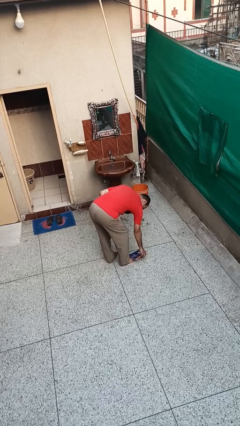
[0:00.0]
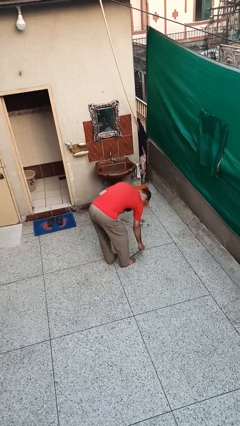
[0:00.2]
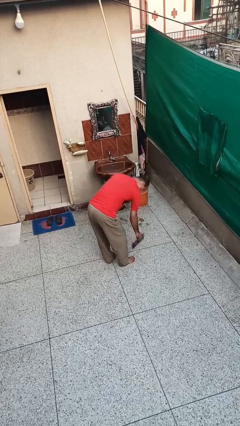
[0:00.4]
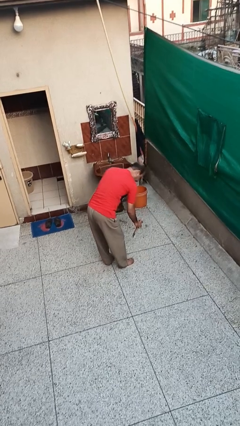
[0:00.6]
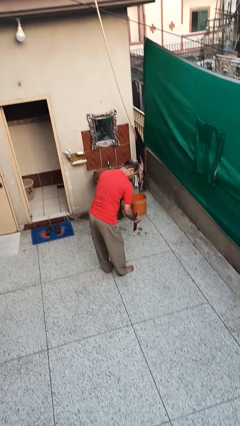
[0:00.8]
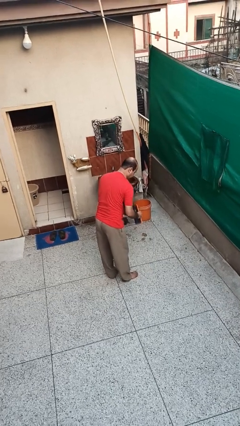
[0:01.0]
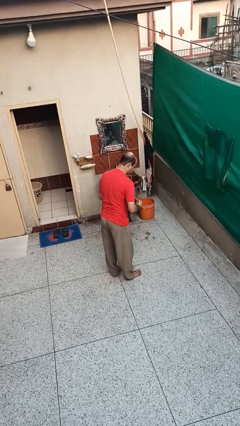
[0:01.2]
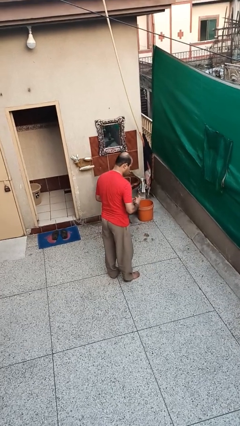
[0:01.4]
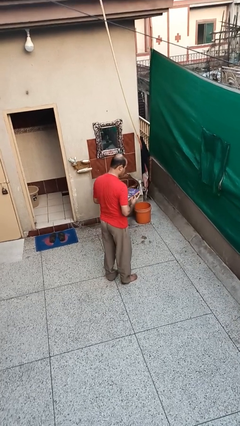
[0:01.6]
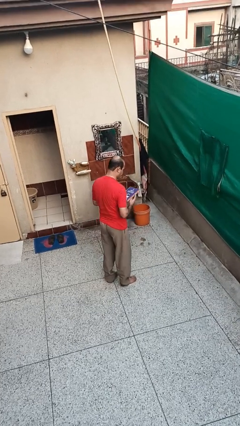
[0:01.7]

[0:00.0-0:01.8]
person picks up object from floor

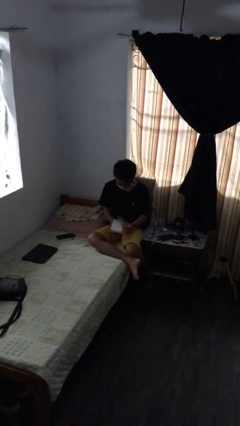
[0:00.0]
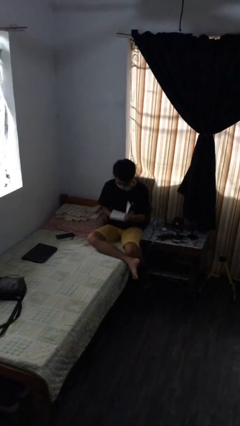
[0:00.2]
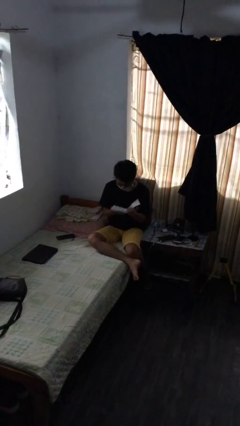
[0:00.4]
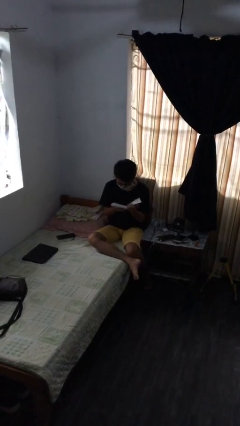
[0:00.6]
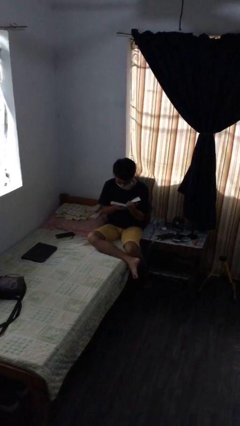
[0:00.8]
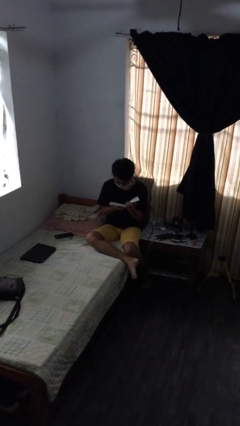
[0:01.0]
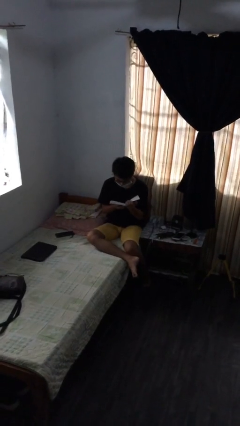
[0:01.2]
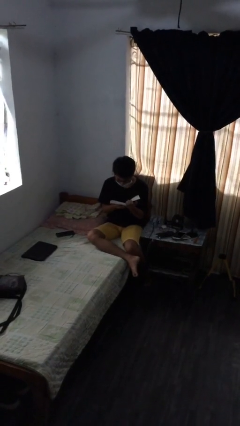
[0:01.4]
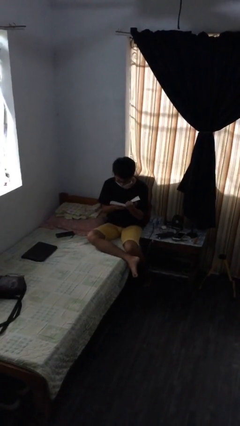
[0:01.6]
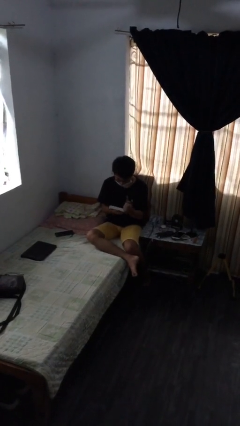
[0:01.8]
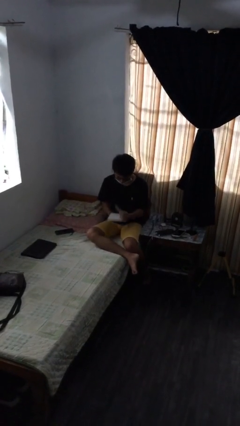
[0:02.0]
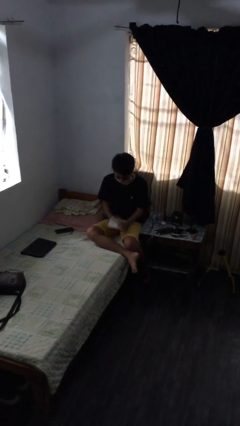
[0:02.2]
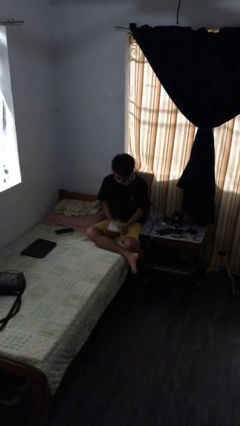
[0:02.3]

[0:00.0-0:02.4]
person reads document

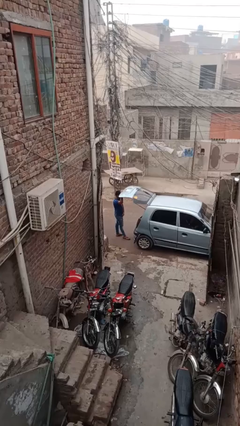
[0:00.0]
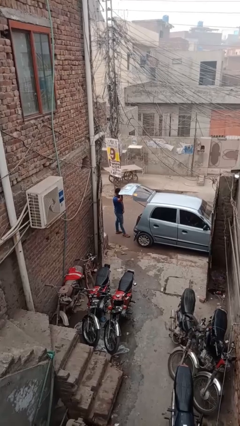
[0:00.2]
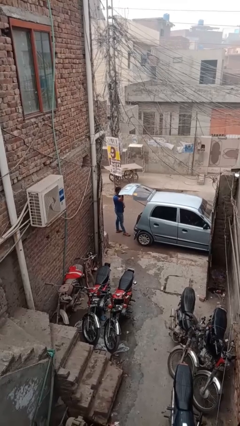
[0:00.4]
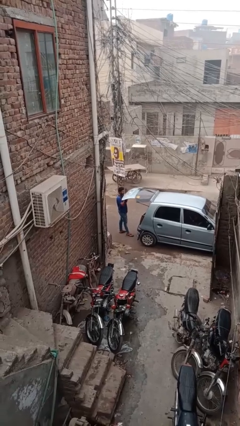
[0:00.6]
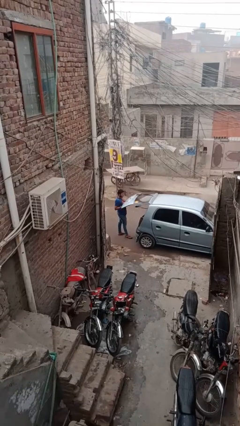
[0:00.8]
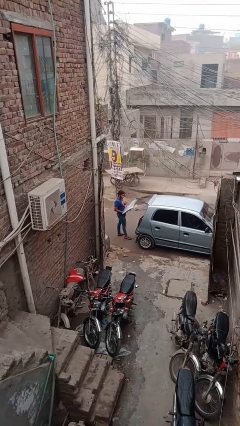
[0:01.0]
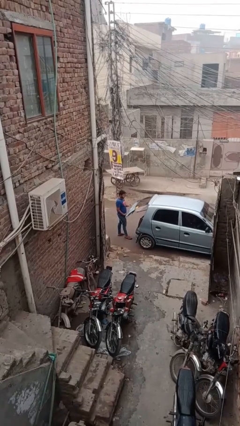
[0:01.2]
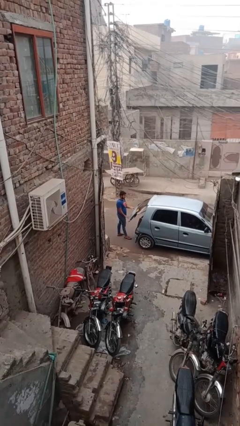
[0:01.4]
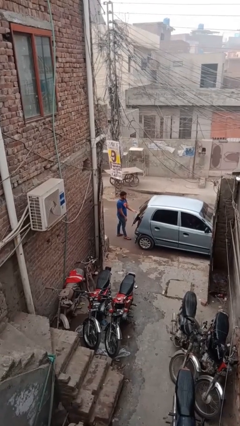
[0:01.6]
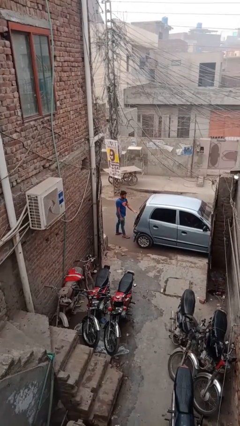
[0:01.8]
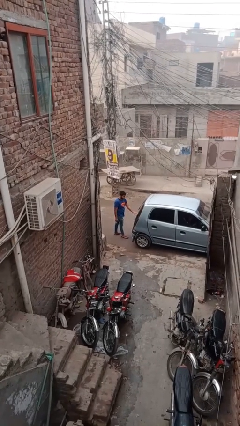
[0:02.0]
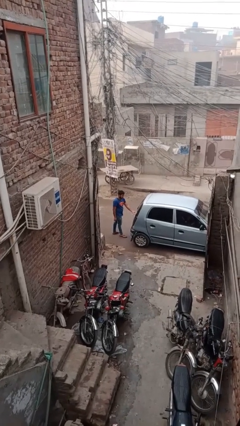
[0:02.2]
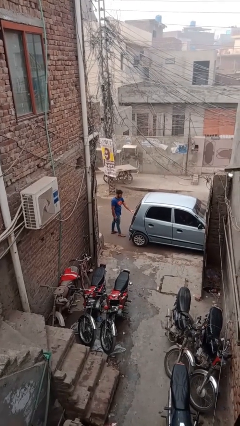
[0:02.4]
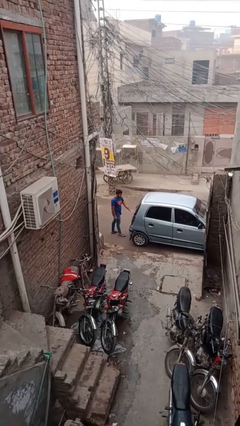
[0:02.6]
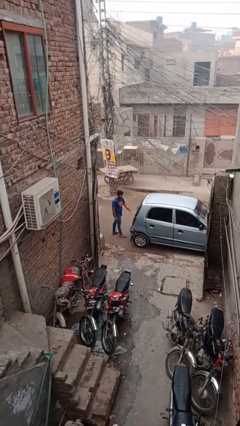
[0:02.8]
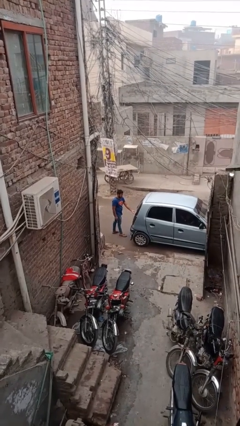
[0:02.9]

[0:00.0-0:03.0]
person closes car trunk

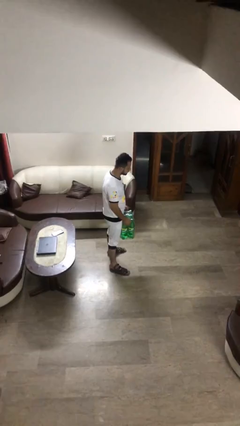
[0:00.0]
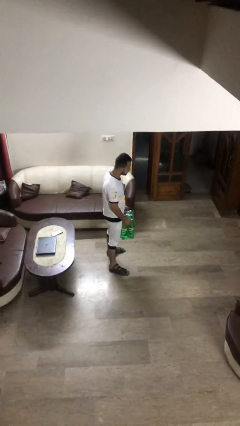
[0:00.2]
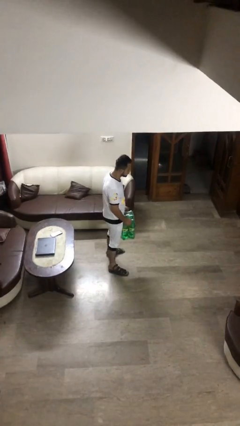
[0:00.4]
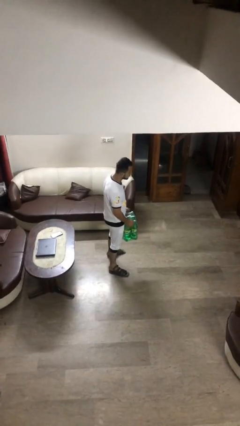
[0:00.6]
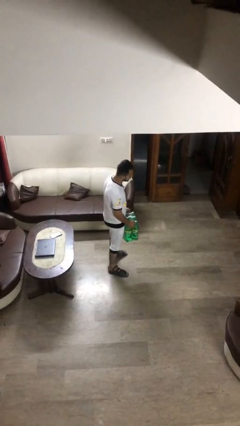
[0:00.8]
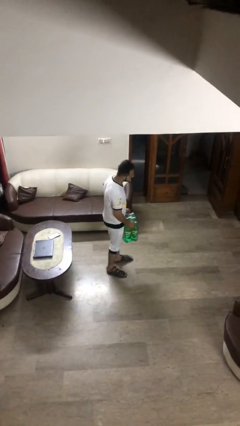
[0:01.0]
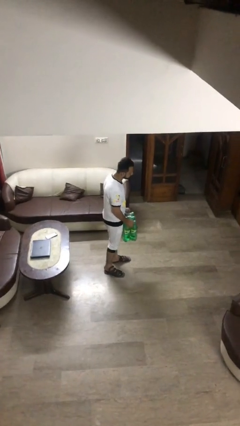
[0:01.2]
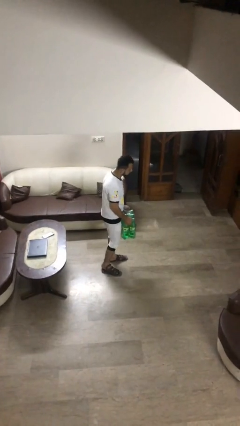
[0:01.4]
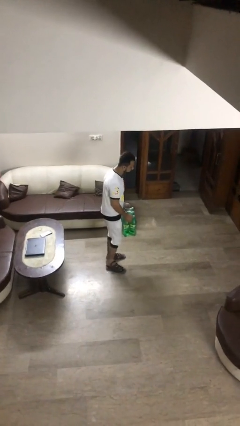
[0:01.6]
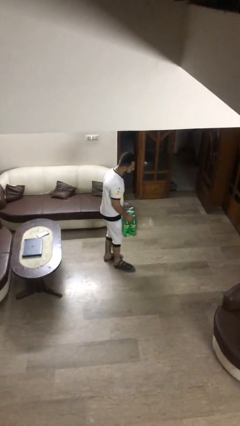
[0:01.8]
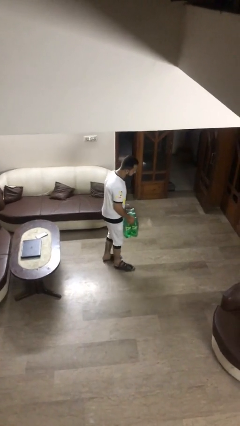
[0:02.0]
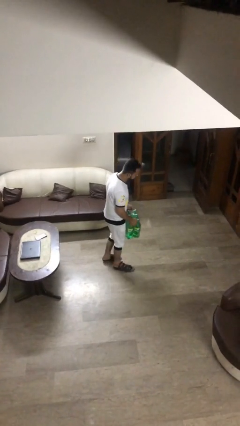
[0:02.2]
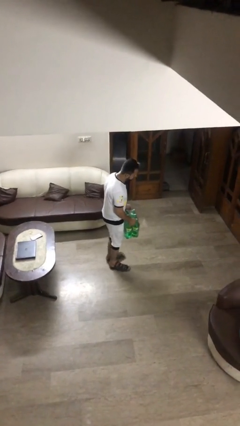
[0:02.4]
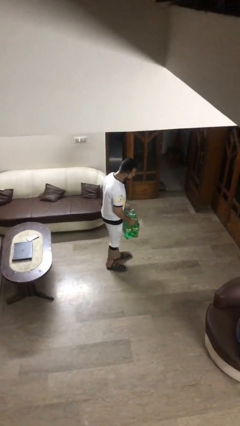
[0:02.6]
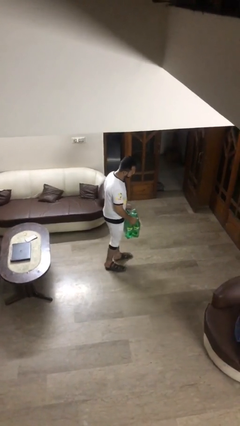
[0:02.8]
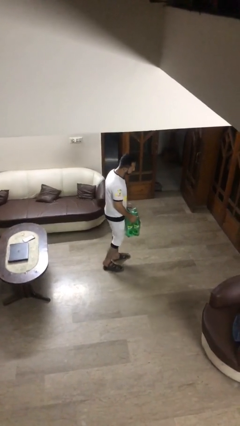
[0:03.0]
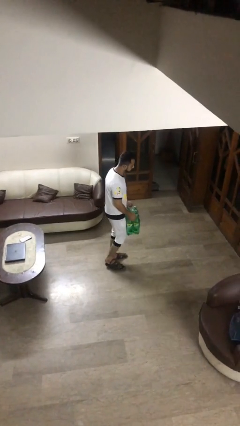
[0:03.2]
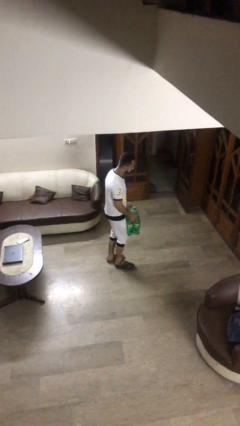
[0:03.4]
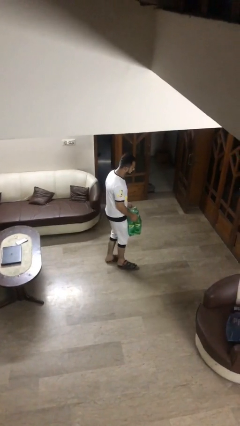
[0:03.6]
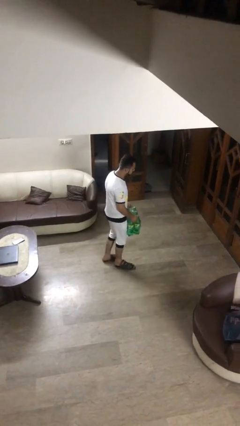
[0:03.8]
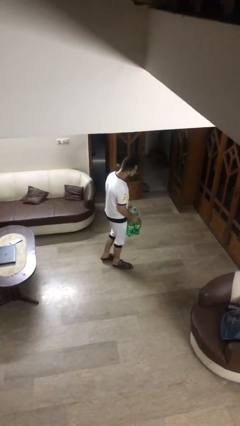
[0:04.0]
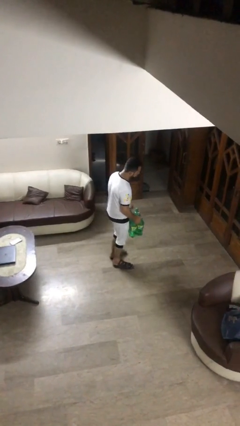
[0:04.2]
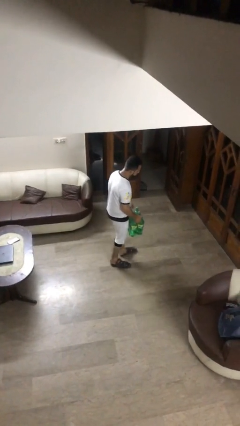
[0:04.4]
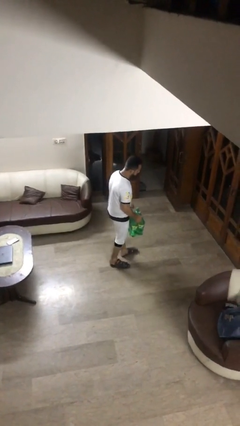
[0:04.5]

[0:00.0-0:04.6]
person carries heavy object

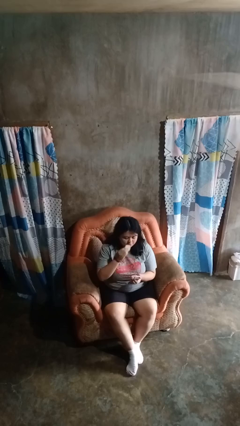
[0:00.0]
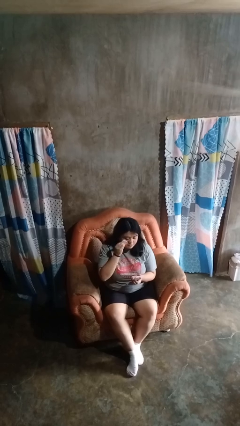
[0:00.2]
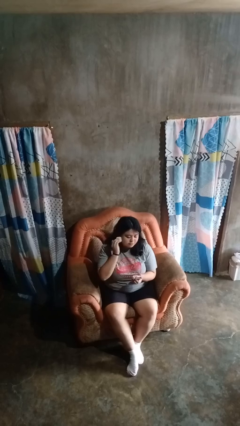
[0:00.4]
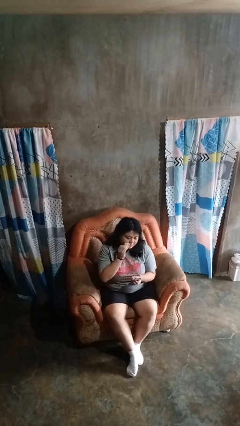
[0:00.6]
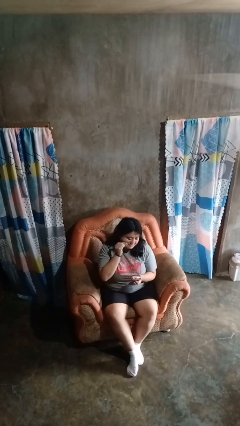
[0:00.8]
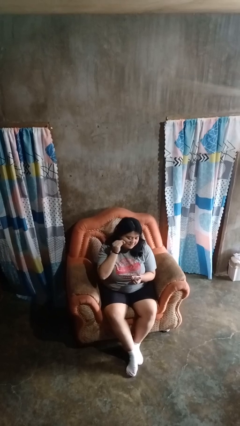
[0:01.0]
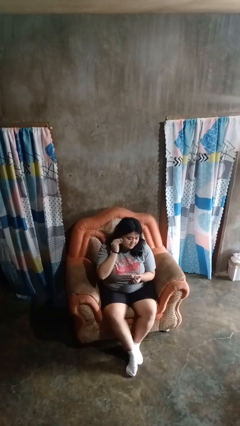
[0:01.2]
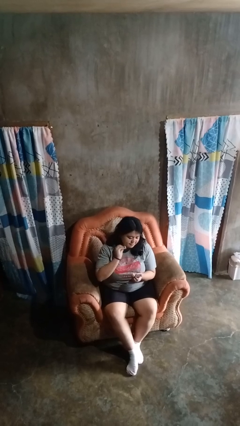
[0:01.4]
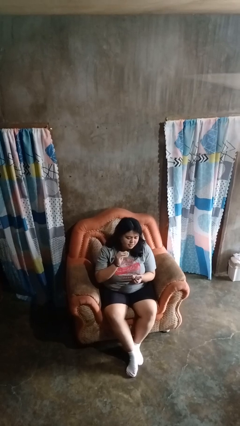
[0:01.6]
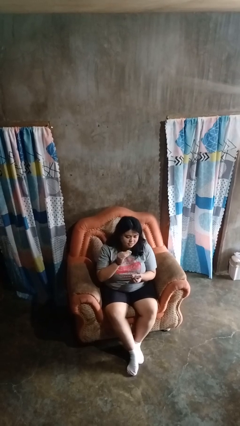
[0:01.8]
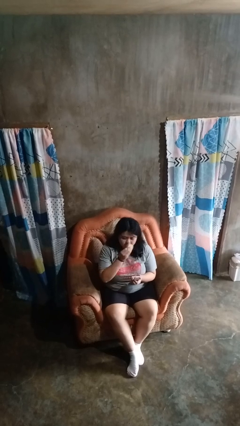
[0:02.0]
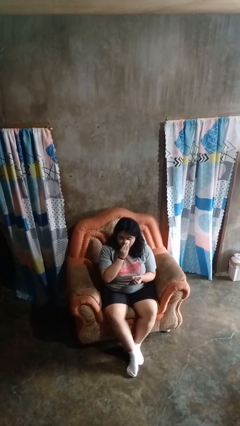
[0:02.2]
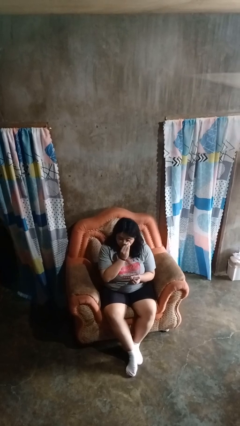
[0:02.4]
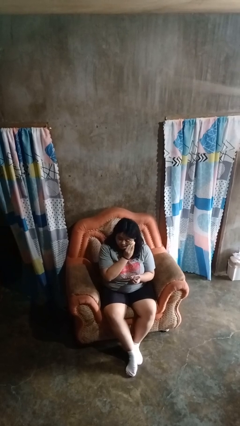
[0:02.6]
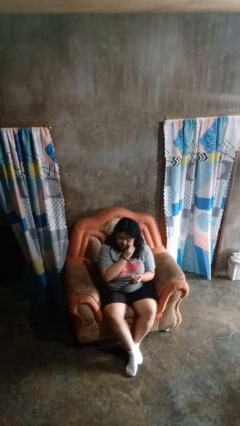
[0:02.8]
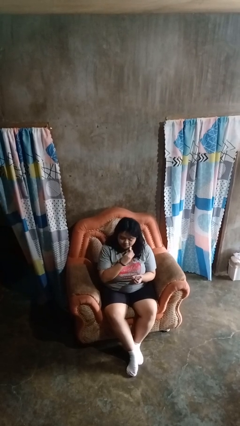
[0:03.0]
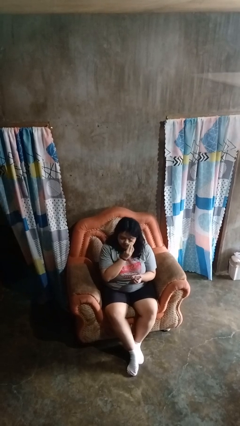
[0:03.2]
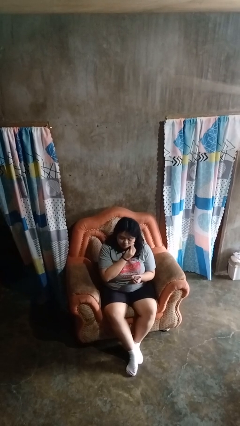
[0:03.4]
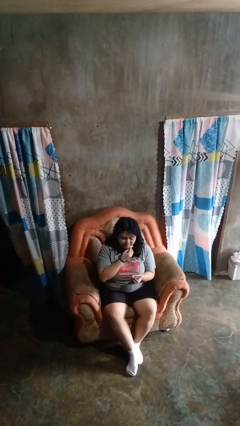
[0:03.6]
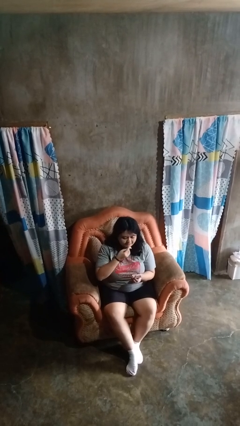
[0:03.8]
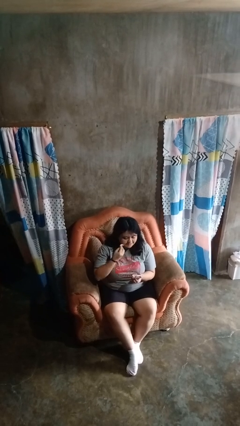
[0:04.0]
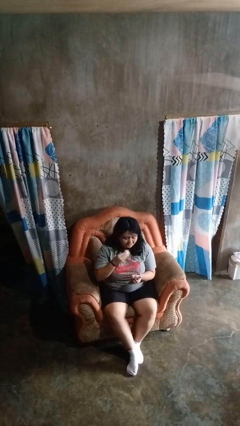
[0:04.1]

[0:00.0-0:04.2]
person applies foundation makeup

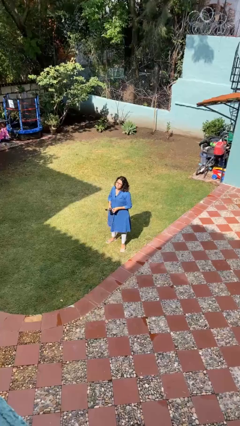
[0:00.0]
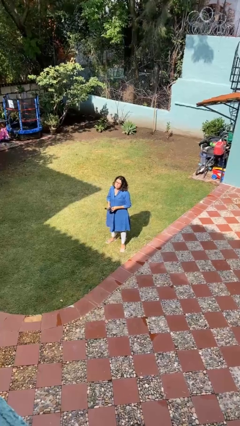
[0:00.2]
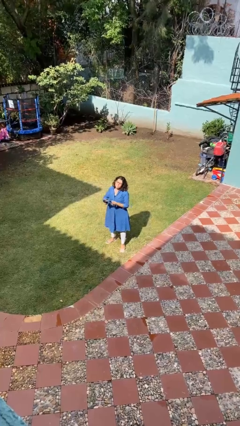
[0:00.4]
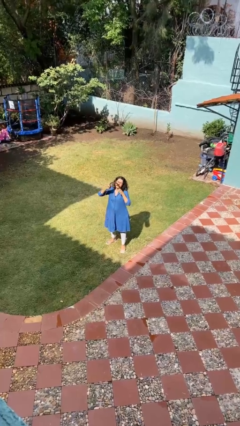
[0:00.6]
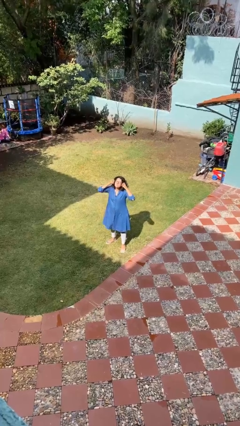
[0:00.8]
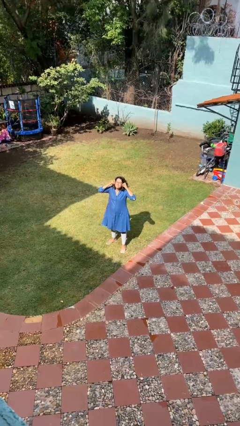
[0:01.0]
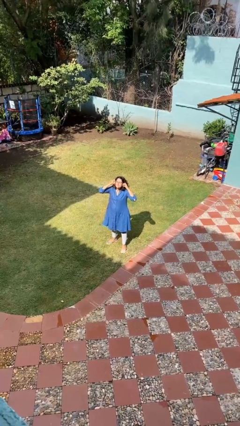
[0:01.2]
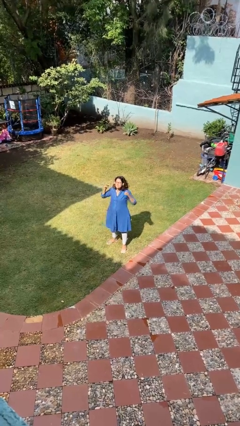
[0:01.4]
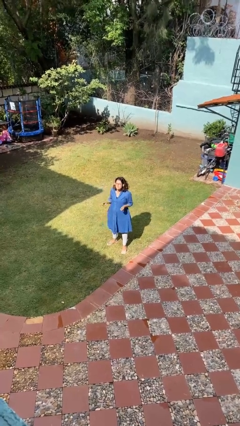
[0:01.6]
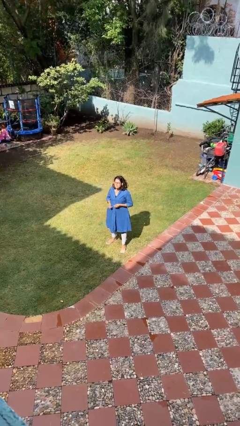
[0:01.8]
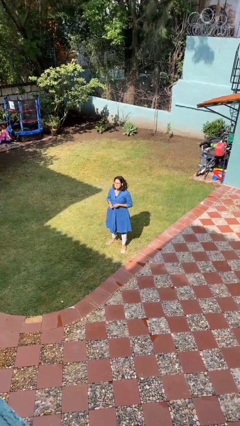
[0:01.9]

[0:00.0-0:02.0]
person puts on headphones
